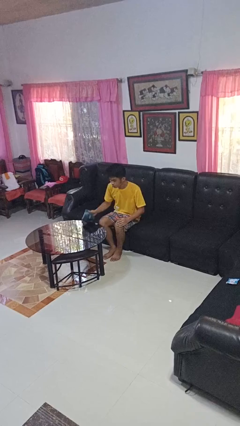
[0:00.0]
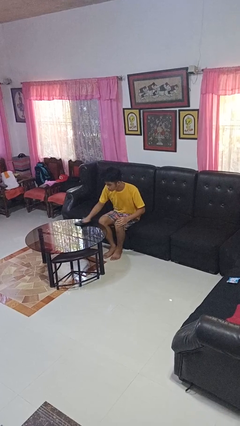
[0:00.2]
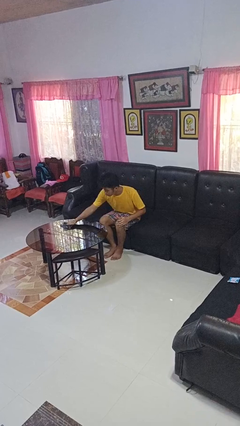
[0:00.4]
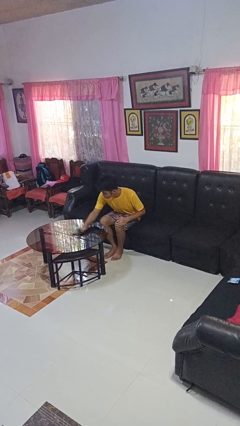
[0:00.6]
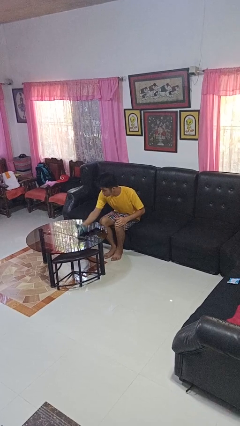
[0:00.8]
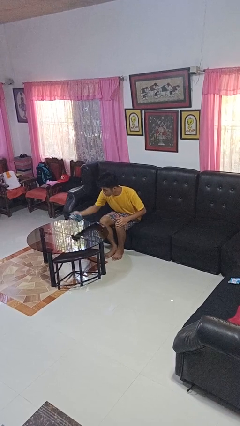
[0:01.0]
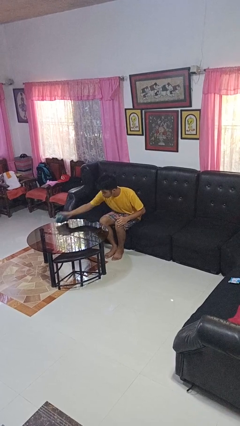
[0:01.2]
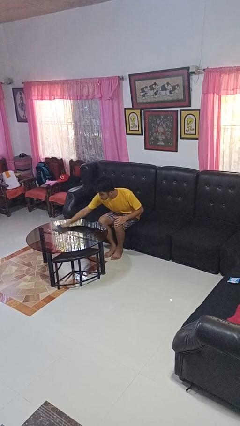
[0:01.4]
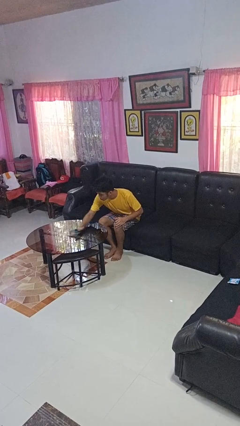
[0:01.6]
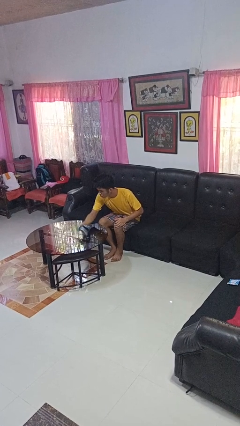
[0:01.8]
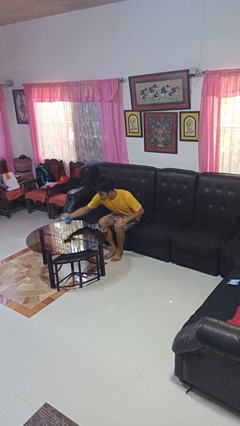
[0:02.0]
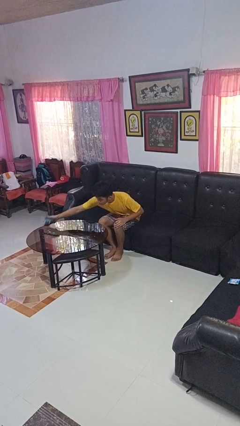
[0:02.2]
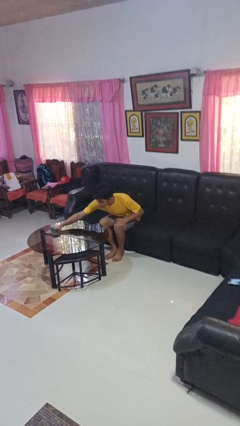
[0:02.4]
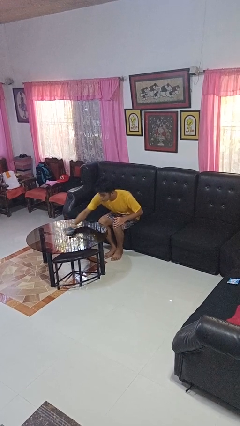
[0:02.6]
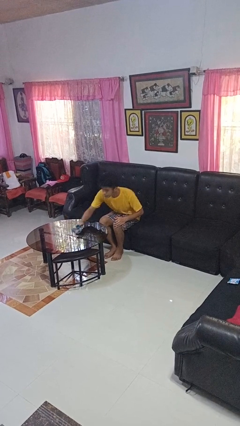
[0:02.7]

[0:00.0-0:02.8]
person cleans table with rag

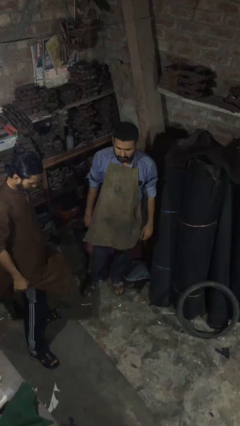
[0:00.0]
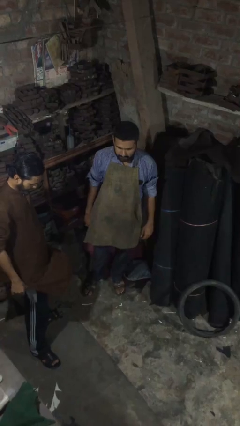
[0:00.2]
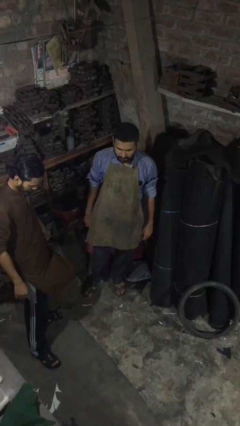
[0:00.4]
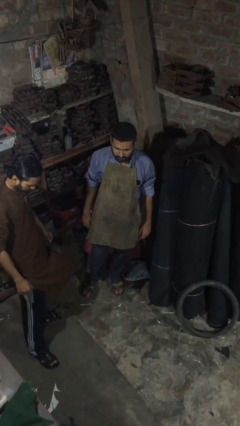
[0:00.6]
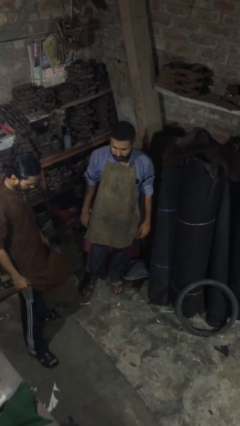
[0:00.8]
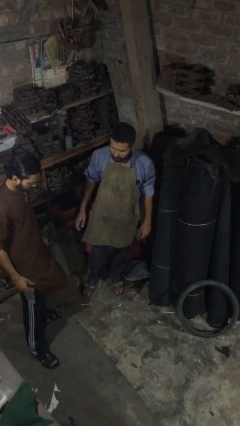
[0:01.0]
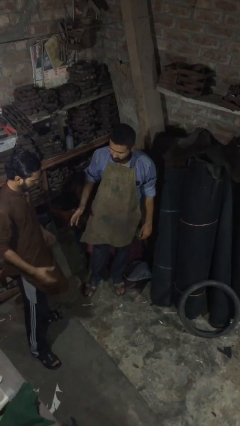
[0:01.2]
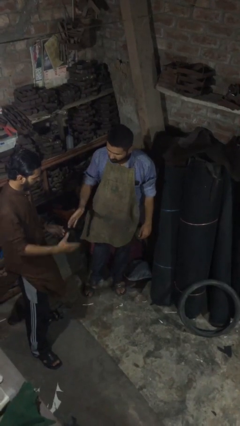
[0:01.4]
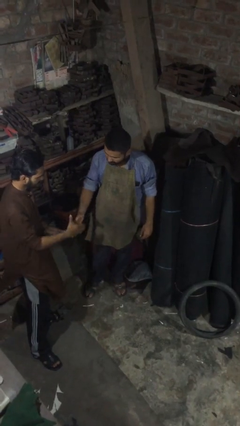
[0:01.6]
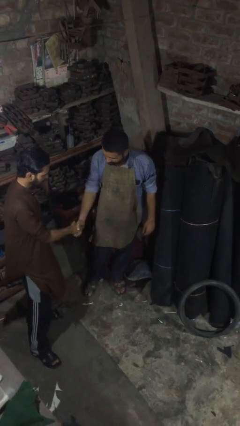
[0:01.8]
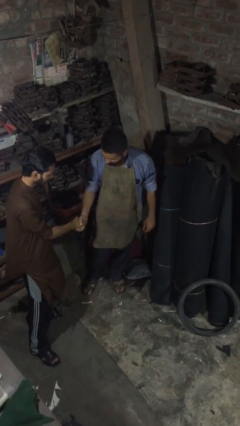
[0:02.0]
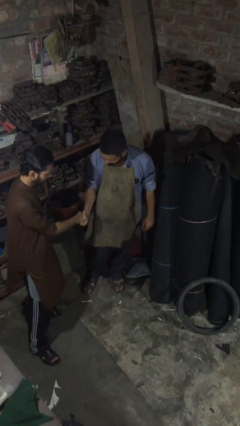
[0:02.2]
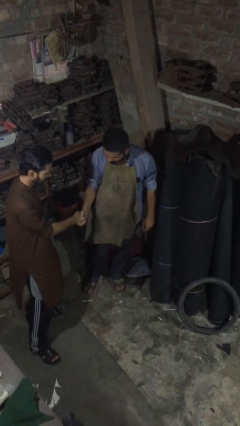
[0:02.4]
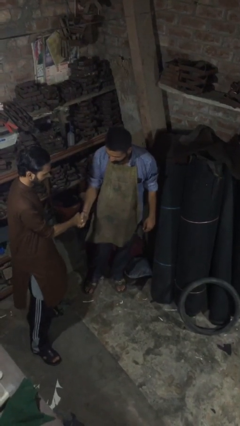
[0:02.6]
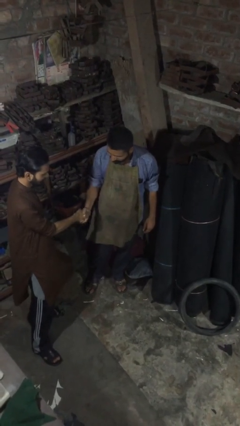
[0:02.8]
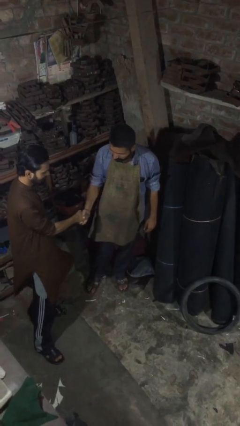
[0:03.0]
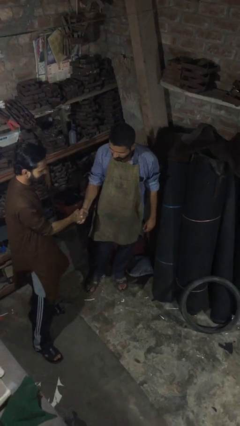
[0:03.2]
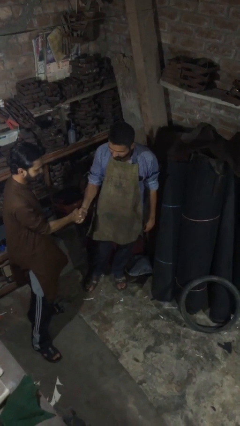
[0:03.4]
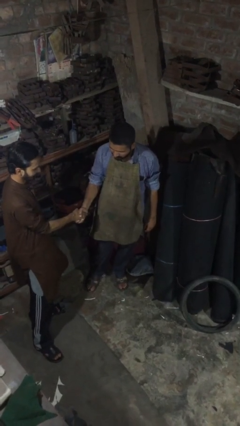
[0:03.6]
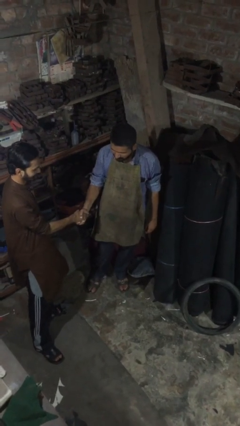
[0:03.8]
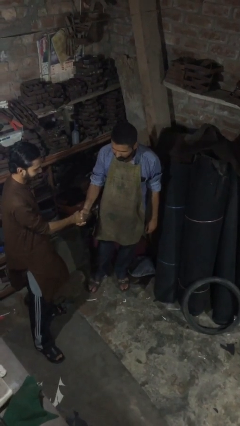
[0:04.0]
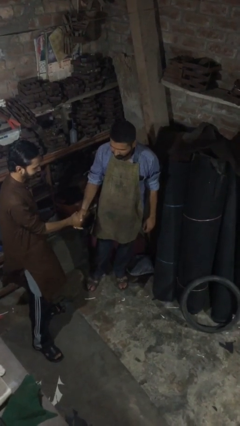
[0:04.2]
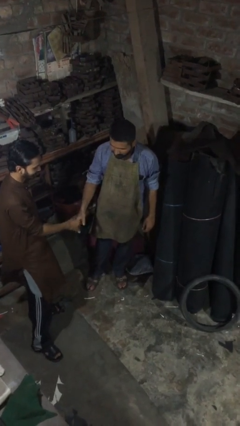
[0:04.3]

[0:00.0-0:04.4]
person shakes hand

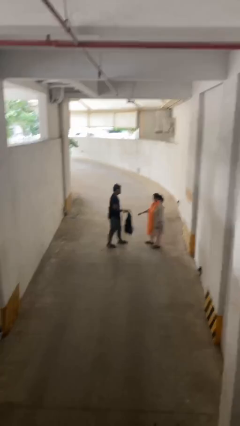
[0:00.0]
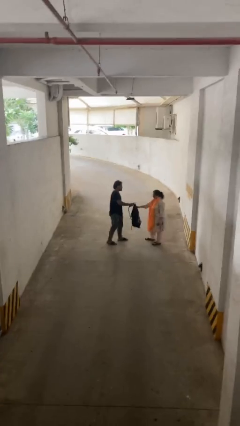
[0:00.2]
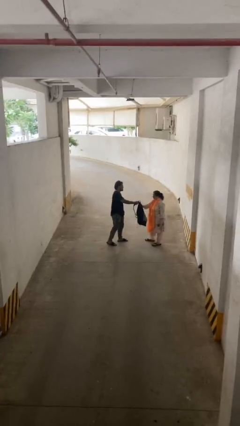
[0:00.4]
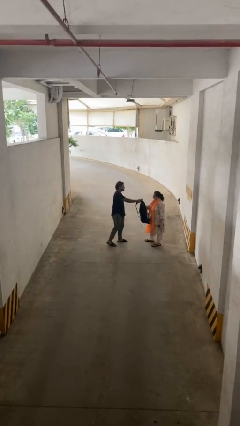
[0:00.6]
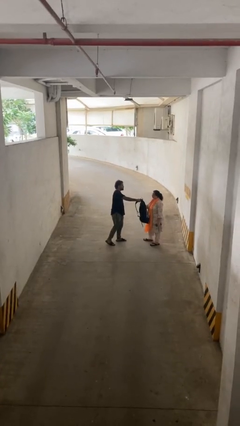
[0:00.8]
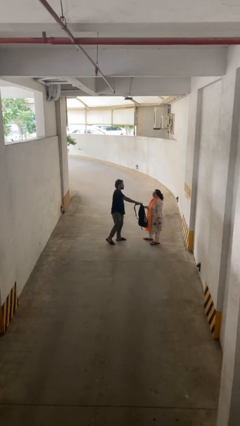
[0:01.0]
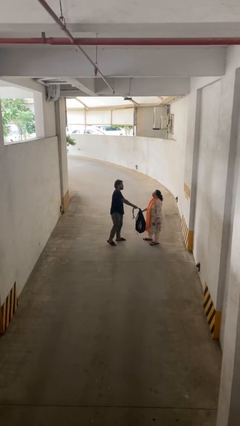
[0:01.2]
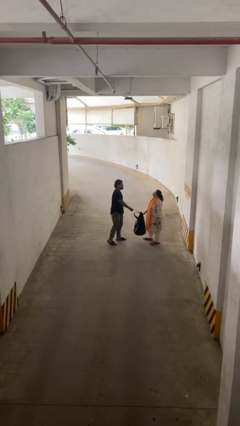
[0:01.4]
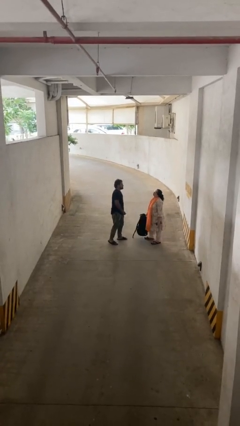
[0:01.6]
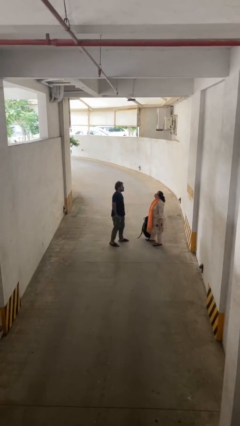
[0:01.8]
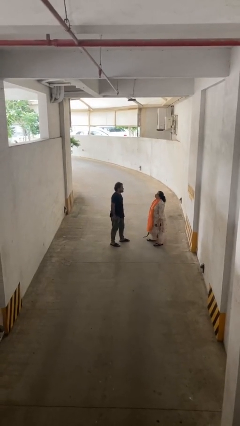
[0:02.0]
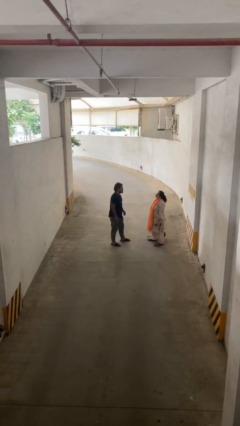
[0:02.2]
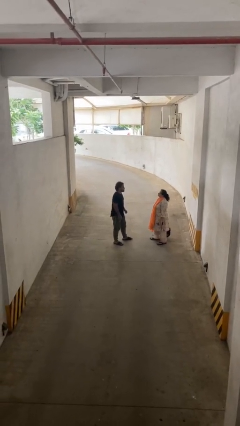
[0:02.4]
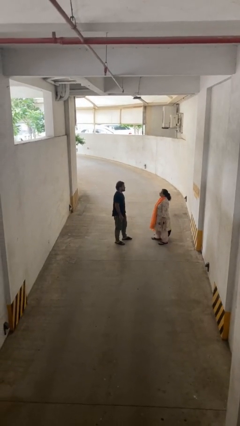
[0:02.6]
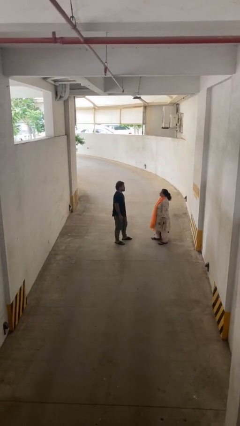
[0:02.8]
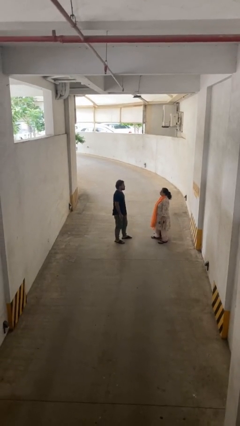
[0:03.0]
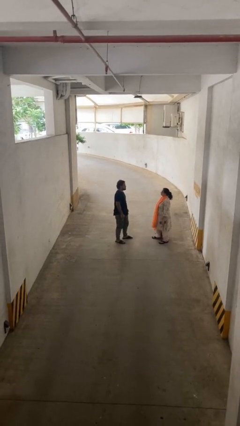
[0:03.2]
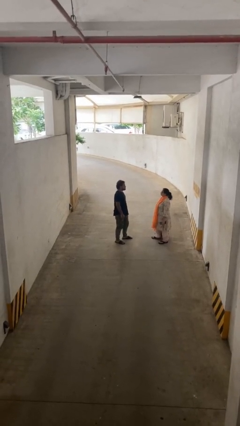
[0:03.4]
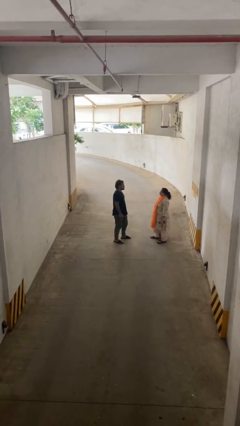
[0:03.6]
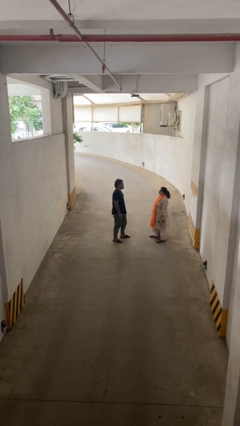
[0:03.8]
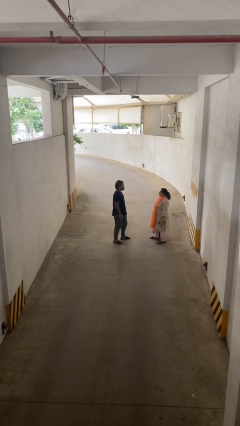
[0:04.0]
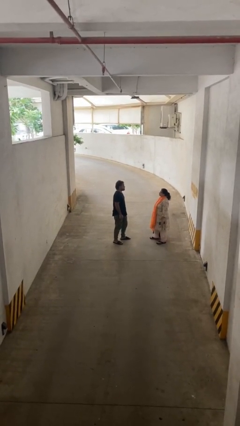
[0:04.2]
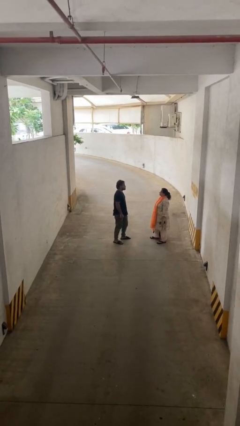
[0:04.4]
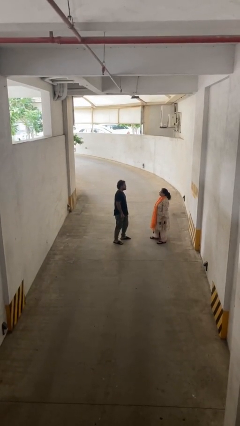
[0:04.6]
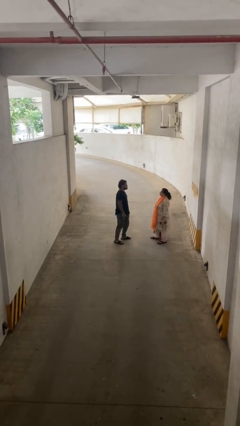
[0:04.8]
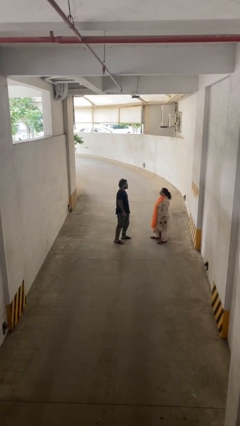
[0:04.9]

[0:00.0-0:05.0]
person transfers object to person

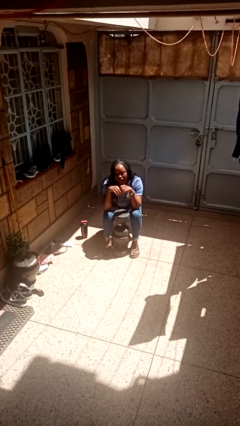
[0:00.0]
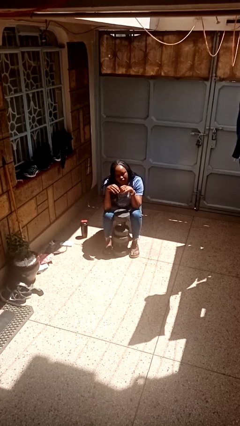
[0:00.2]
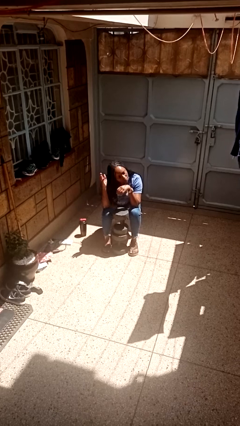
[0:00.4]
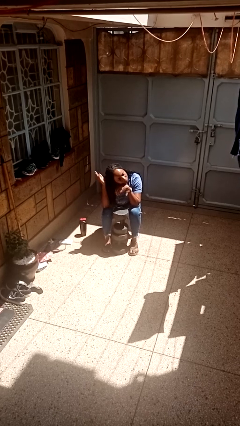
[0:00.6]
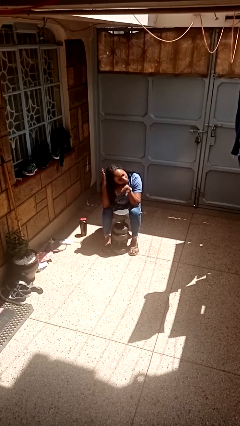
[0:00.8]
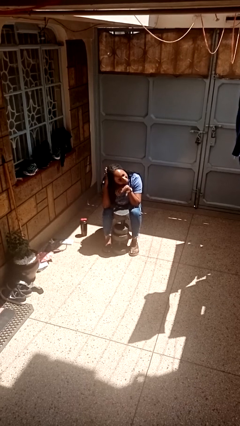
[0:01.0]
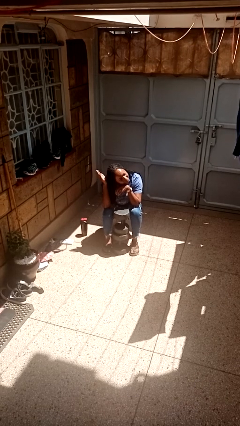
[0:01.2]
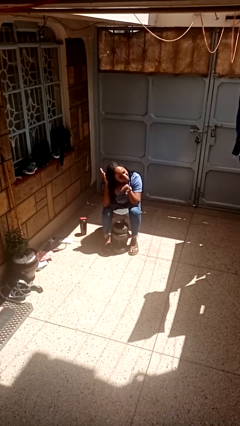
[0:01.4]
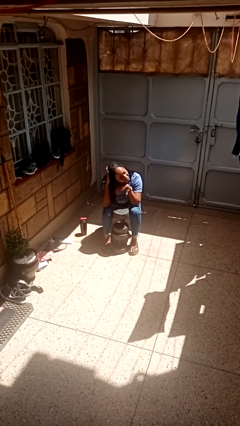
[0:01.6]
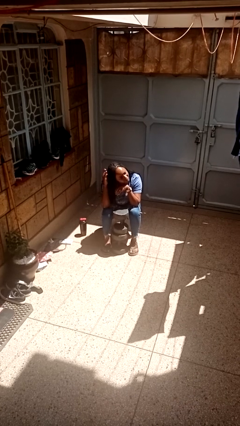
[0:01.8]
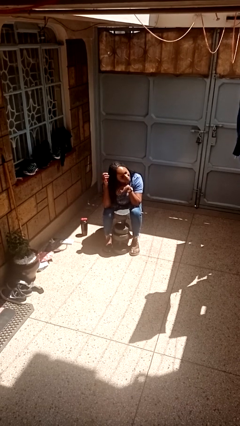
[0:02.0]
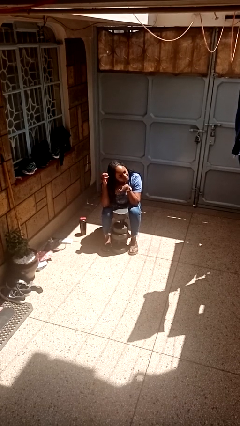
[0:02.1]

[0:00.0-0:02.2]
person pats head

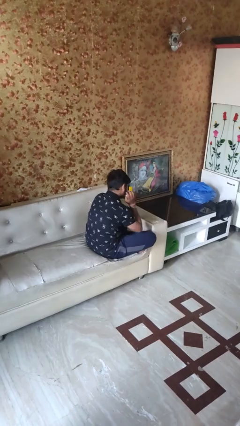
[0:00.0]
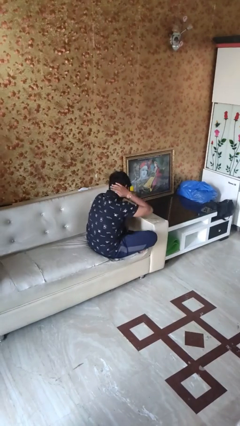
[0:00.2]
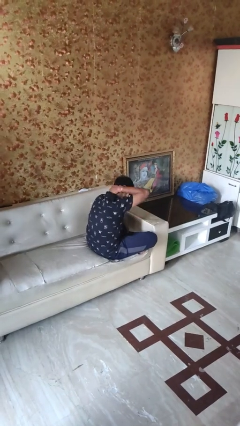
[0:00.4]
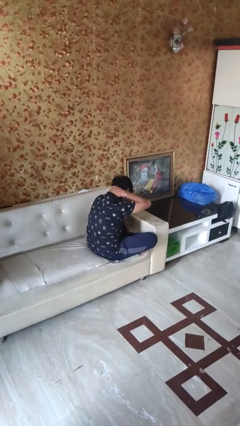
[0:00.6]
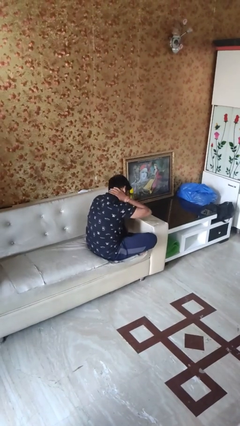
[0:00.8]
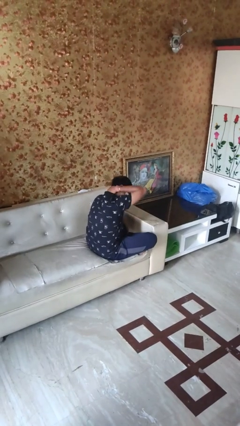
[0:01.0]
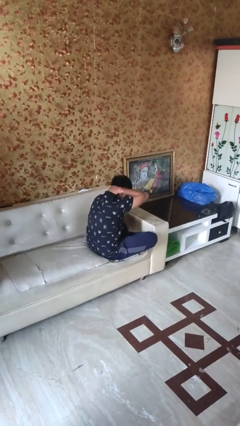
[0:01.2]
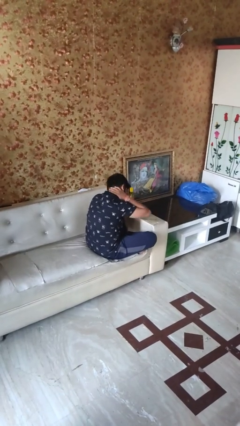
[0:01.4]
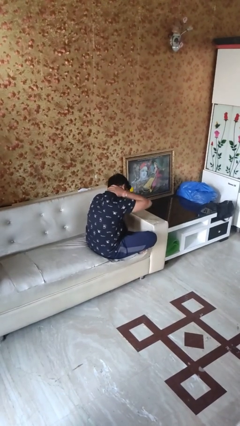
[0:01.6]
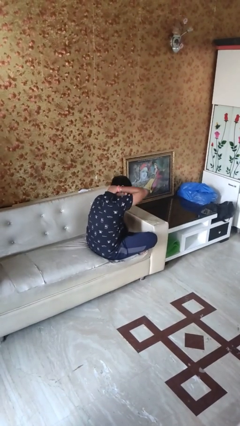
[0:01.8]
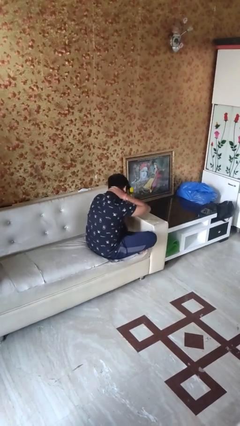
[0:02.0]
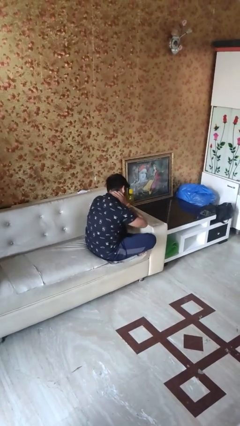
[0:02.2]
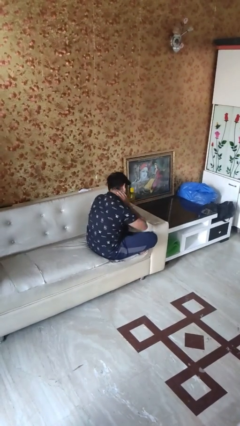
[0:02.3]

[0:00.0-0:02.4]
person rubs neck

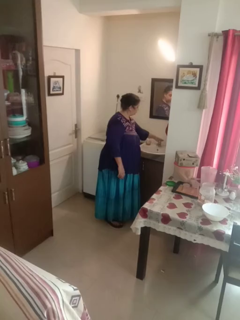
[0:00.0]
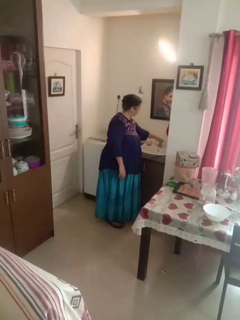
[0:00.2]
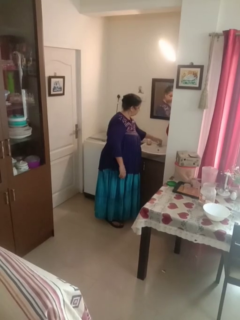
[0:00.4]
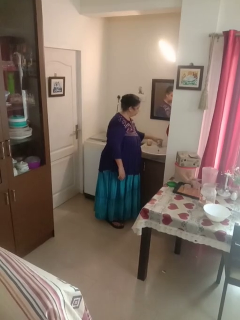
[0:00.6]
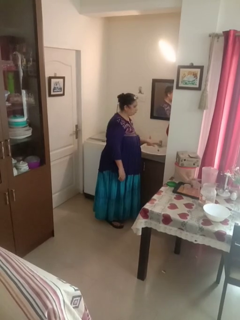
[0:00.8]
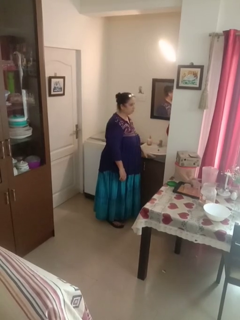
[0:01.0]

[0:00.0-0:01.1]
person turns off faucet
